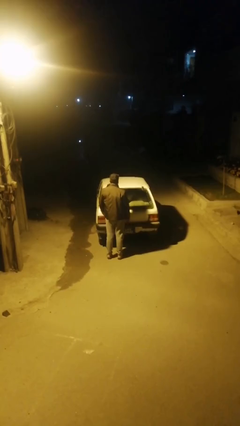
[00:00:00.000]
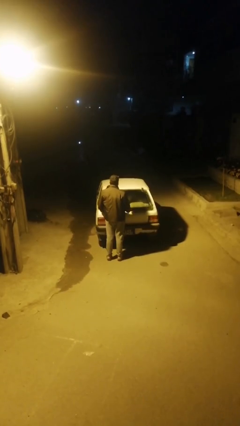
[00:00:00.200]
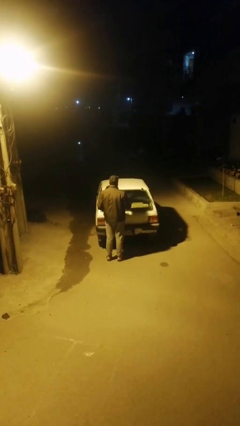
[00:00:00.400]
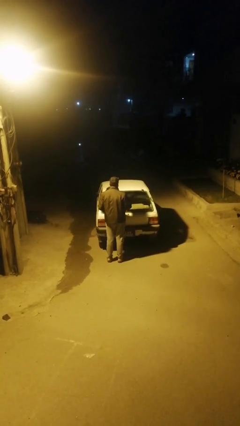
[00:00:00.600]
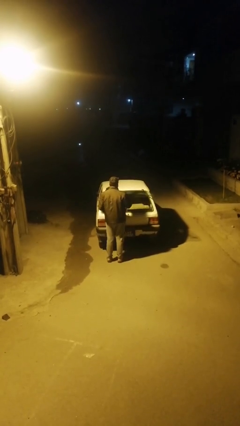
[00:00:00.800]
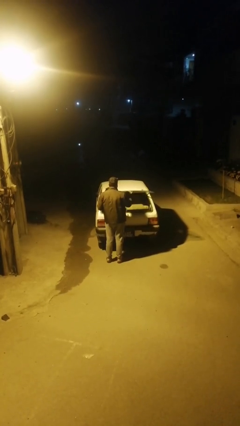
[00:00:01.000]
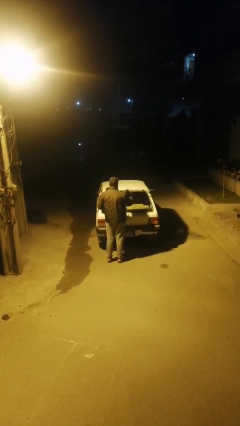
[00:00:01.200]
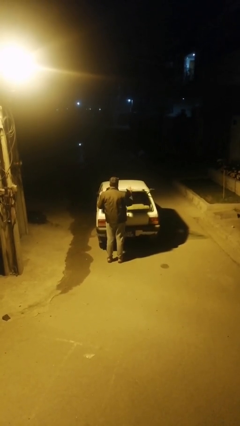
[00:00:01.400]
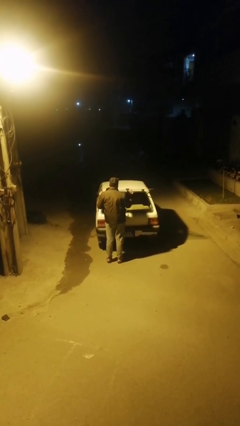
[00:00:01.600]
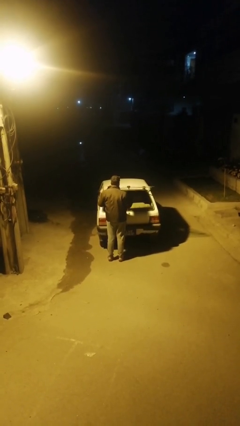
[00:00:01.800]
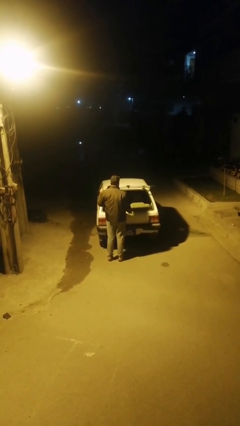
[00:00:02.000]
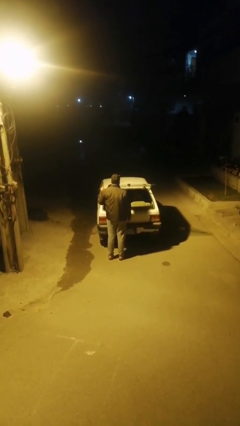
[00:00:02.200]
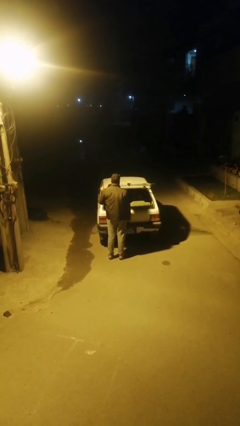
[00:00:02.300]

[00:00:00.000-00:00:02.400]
person opens car trunk

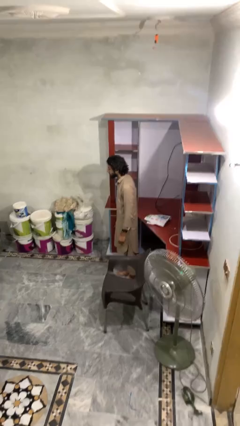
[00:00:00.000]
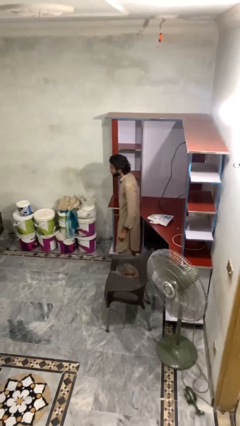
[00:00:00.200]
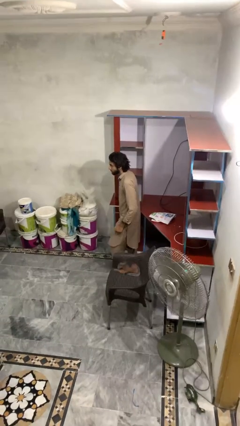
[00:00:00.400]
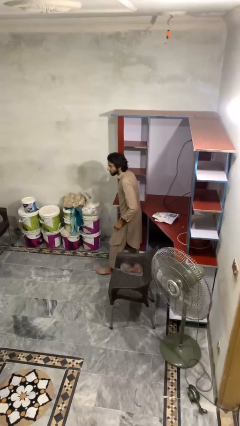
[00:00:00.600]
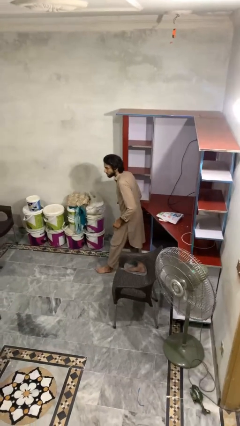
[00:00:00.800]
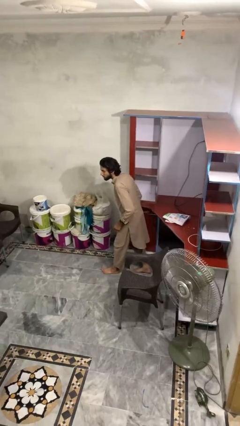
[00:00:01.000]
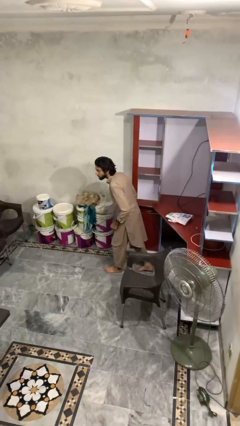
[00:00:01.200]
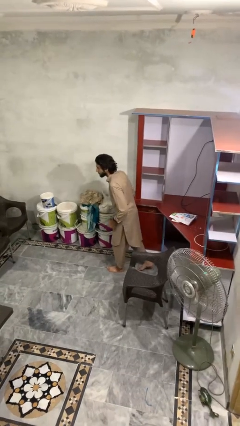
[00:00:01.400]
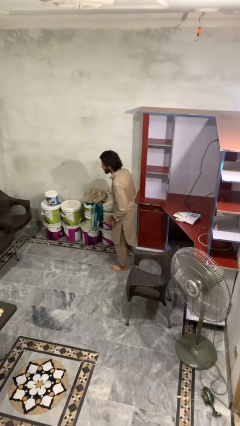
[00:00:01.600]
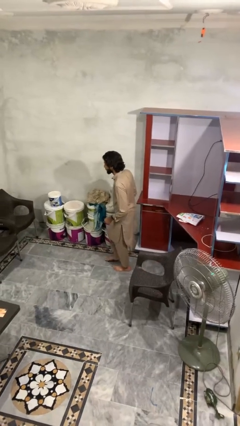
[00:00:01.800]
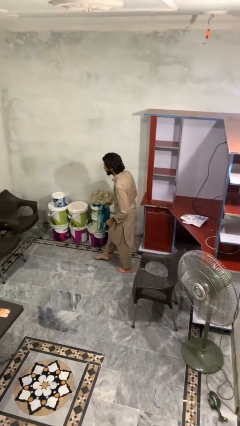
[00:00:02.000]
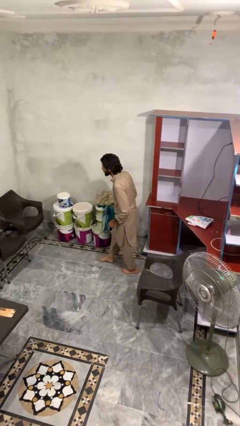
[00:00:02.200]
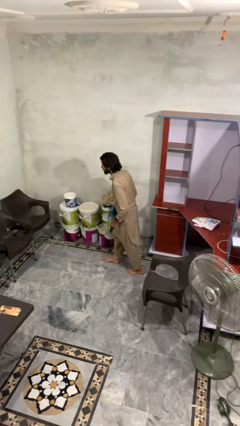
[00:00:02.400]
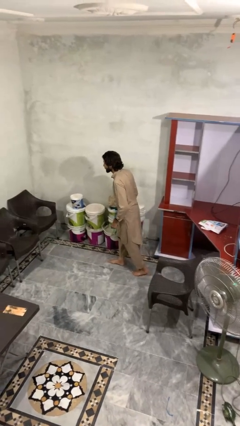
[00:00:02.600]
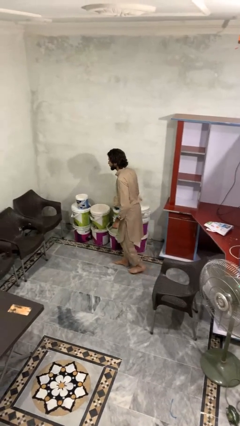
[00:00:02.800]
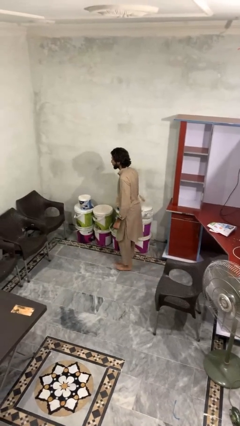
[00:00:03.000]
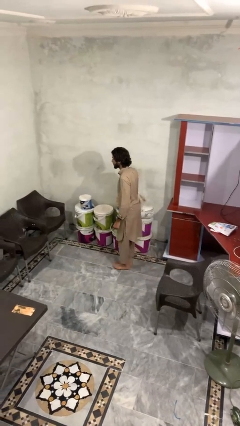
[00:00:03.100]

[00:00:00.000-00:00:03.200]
person walks tiptoe

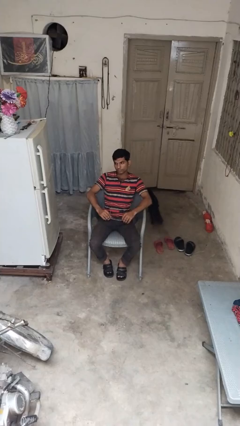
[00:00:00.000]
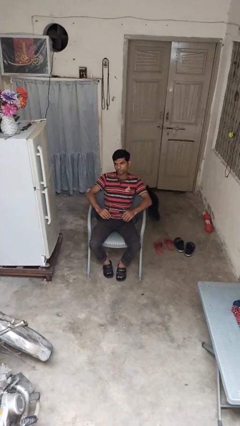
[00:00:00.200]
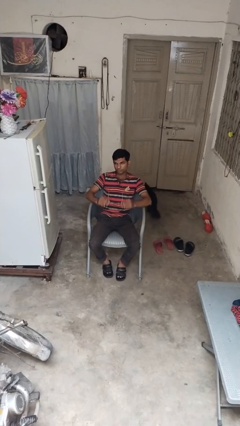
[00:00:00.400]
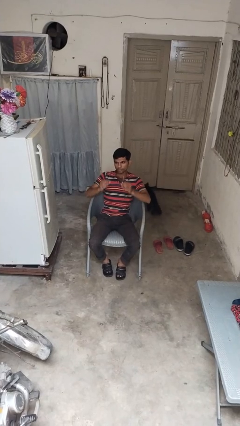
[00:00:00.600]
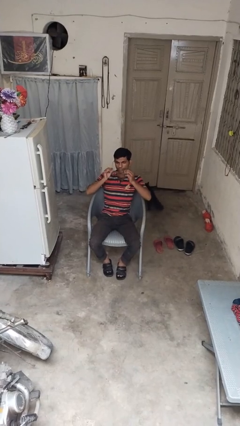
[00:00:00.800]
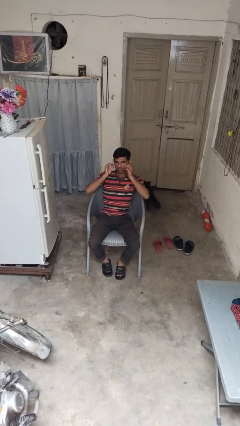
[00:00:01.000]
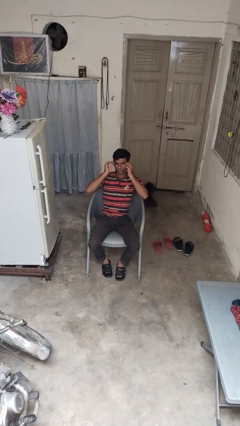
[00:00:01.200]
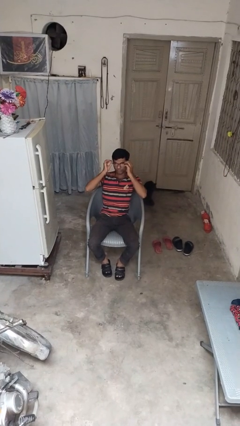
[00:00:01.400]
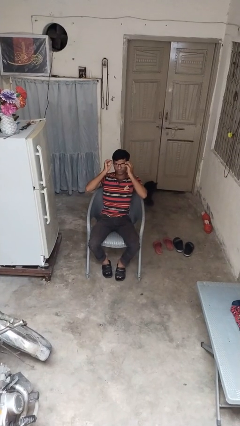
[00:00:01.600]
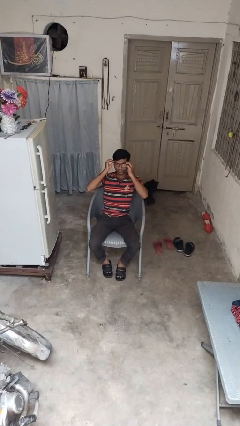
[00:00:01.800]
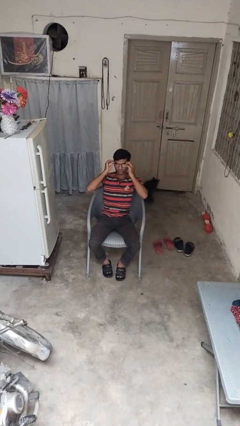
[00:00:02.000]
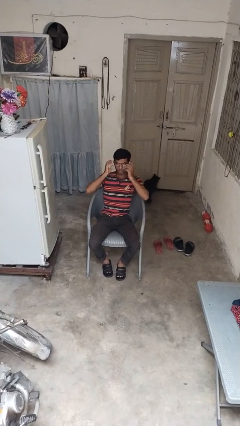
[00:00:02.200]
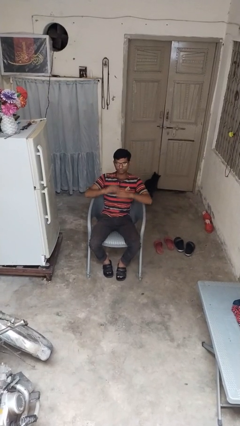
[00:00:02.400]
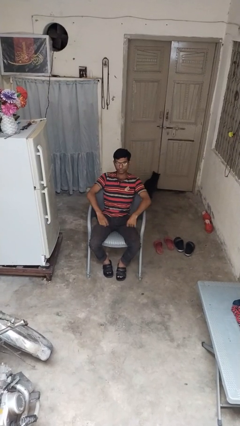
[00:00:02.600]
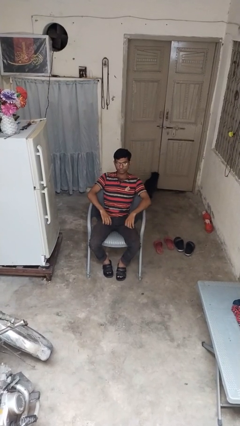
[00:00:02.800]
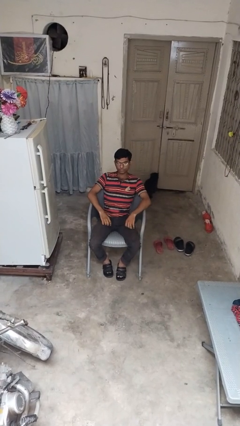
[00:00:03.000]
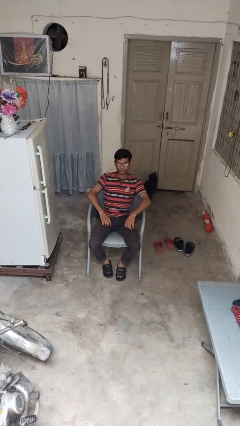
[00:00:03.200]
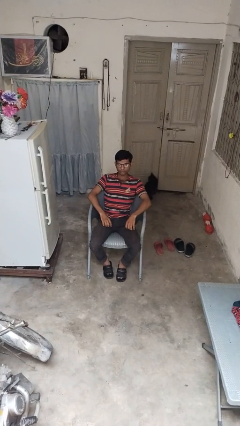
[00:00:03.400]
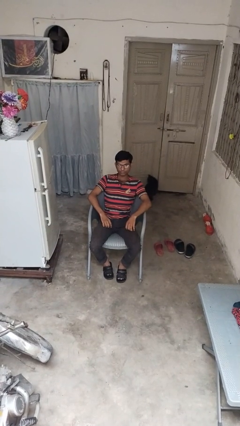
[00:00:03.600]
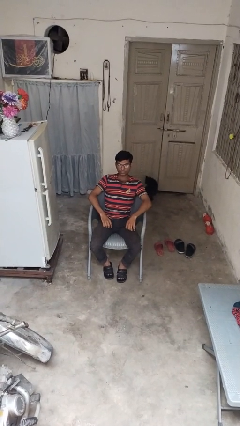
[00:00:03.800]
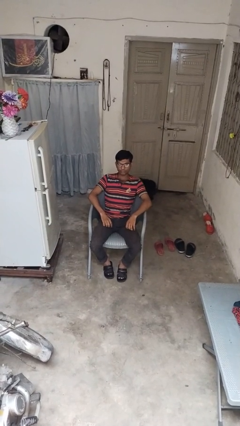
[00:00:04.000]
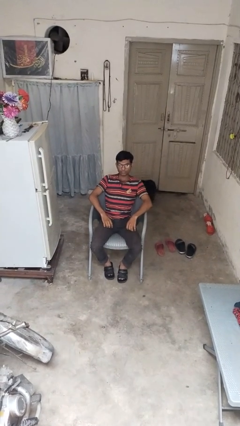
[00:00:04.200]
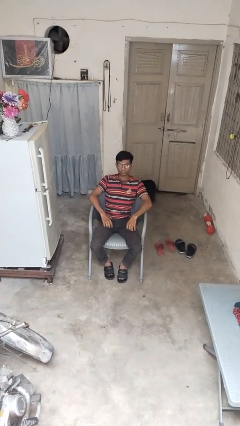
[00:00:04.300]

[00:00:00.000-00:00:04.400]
person puts on glasses

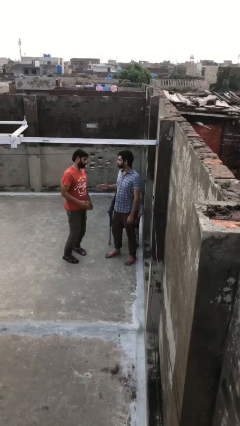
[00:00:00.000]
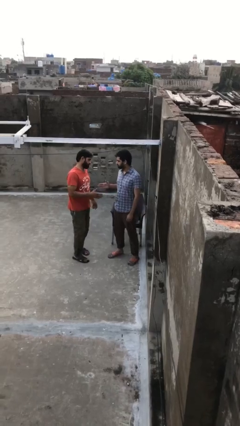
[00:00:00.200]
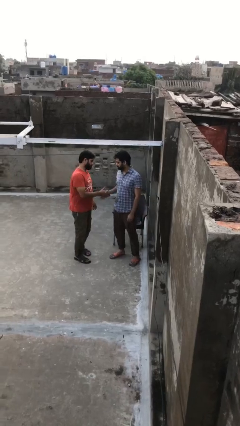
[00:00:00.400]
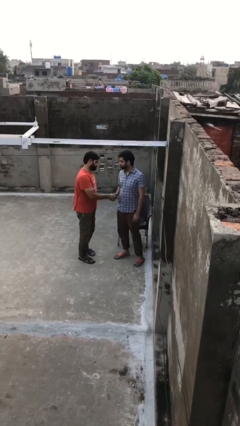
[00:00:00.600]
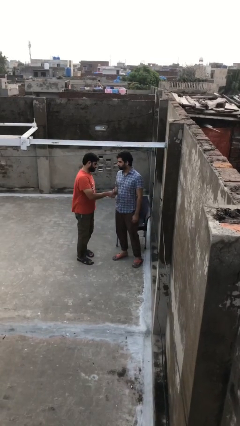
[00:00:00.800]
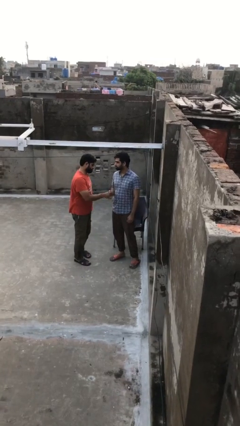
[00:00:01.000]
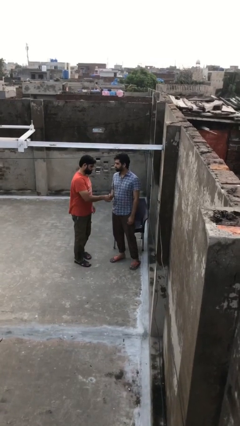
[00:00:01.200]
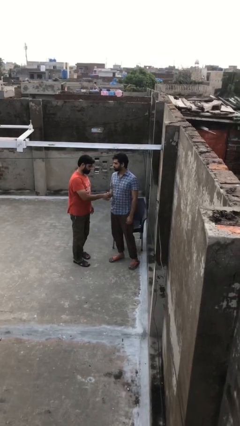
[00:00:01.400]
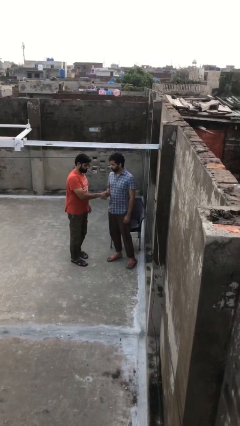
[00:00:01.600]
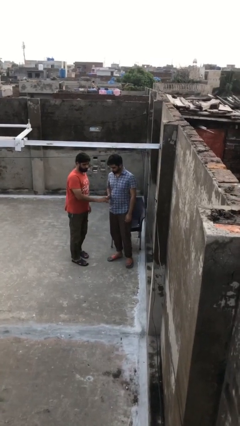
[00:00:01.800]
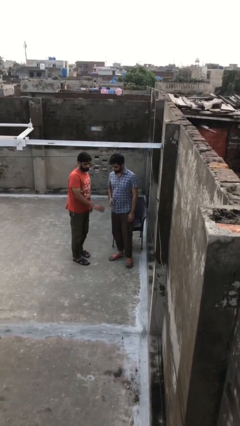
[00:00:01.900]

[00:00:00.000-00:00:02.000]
person shakes hand

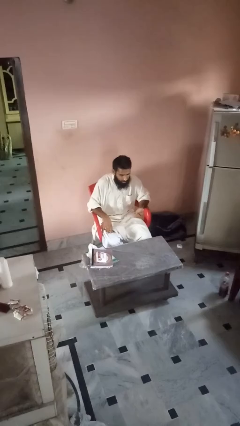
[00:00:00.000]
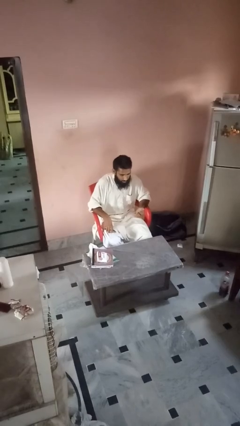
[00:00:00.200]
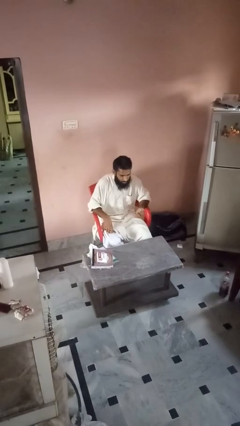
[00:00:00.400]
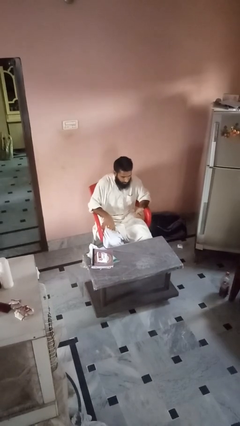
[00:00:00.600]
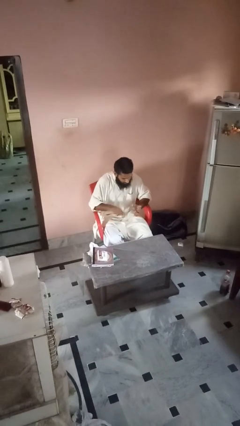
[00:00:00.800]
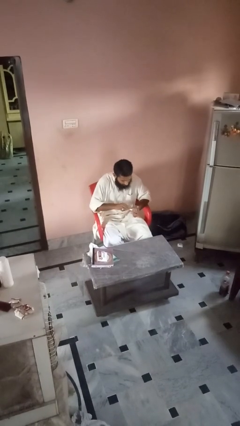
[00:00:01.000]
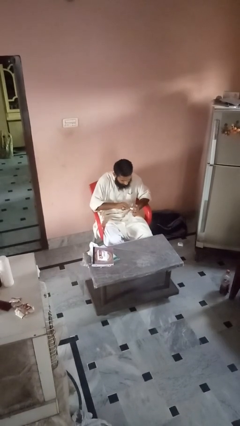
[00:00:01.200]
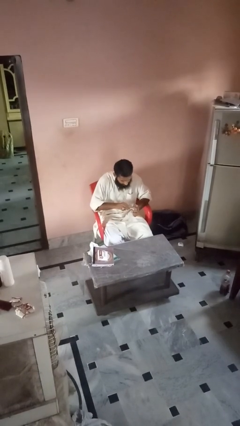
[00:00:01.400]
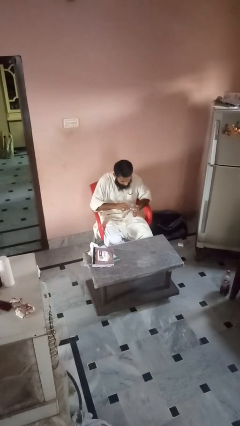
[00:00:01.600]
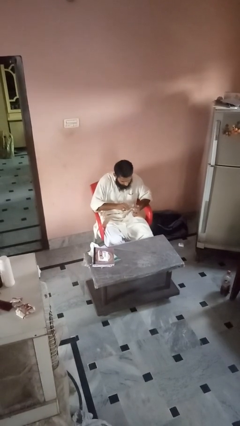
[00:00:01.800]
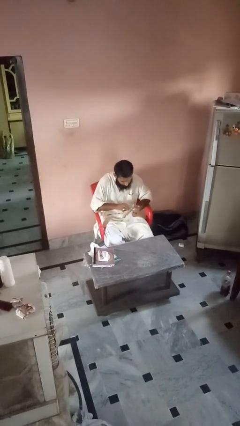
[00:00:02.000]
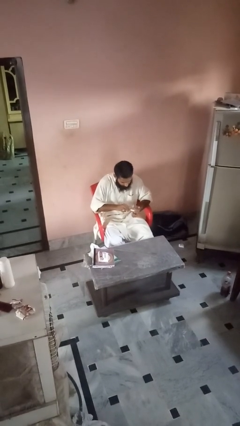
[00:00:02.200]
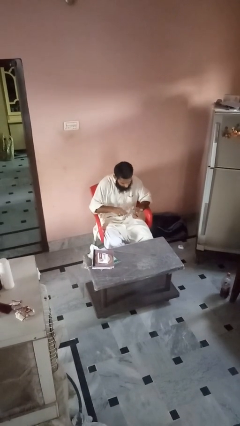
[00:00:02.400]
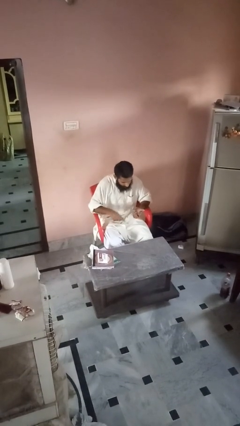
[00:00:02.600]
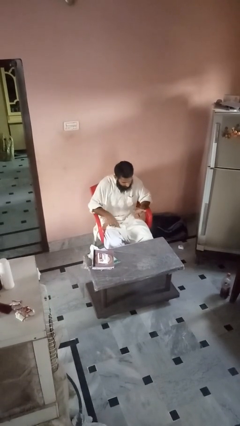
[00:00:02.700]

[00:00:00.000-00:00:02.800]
person clips fingernails

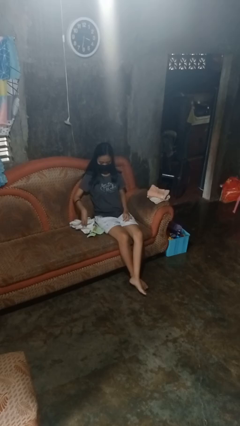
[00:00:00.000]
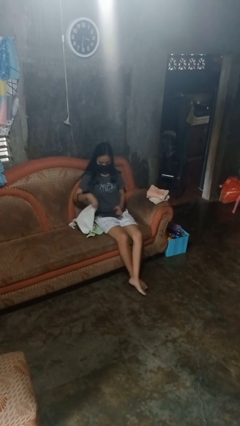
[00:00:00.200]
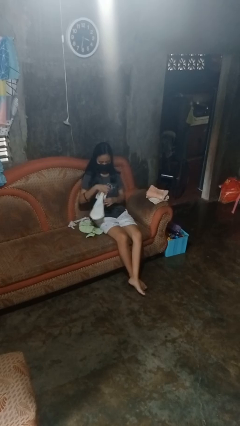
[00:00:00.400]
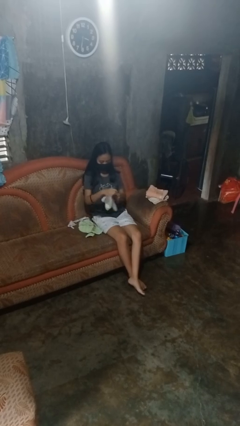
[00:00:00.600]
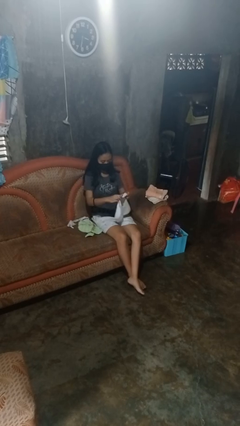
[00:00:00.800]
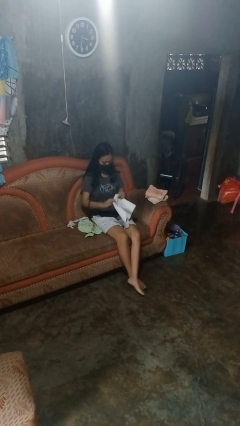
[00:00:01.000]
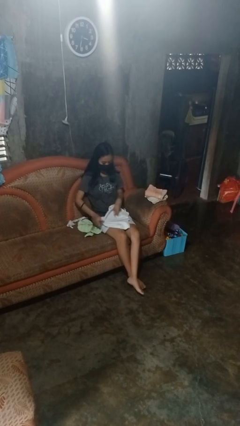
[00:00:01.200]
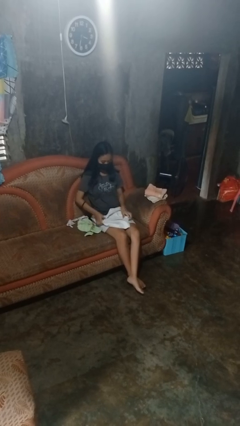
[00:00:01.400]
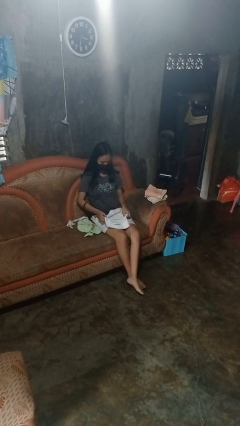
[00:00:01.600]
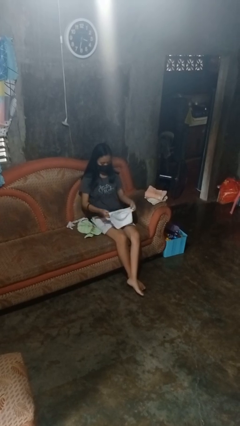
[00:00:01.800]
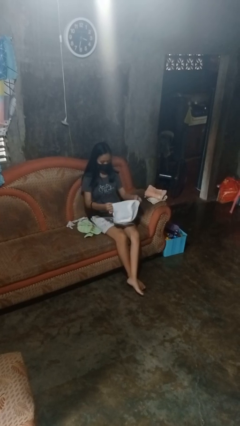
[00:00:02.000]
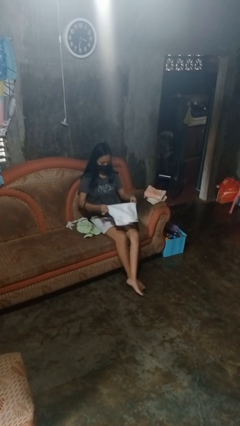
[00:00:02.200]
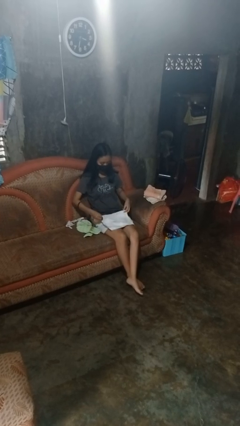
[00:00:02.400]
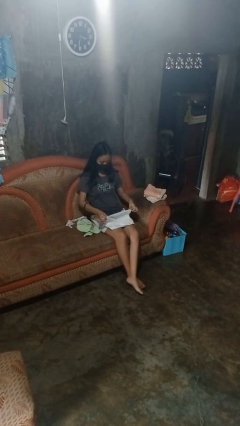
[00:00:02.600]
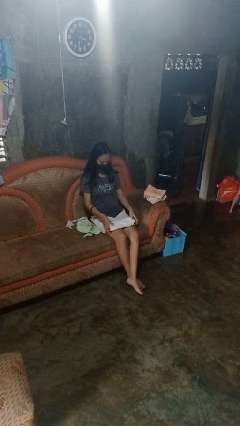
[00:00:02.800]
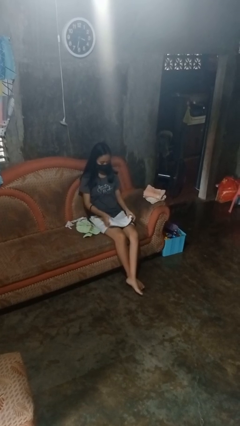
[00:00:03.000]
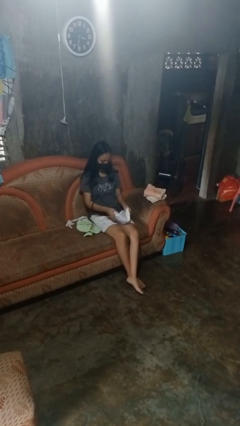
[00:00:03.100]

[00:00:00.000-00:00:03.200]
person folds towel
